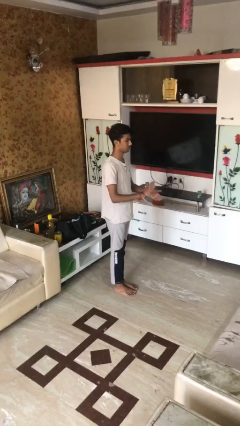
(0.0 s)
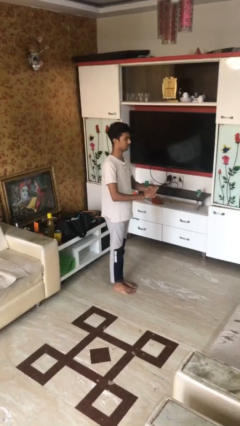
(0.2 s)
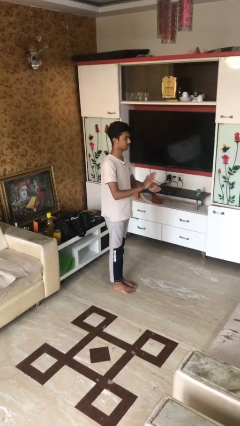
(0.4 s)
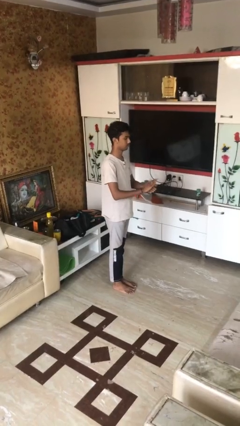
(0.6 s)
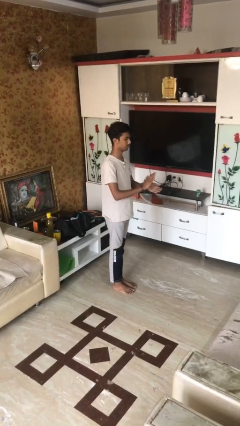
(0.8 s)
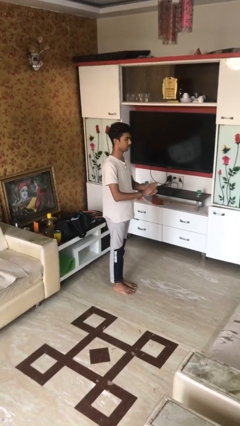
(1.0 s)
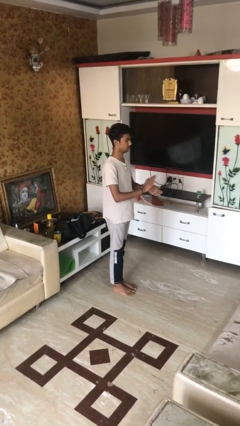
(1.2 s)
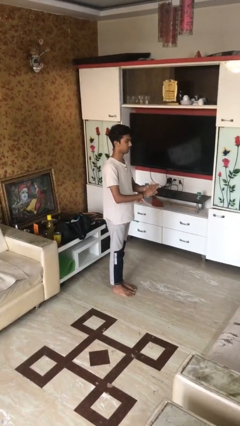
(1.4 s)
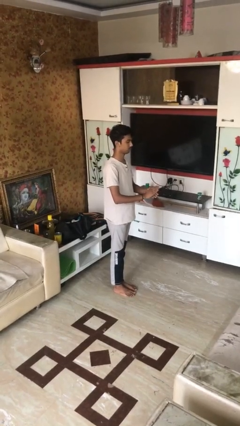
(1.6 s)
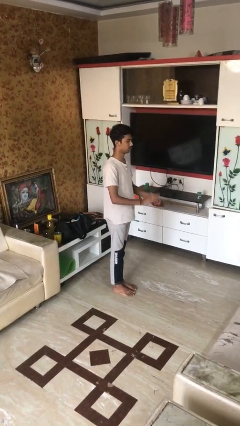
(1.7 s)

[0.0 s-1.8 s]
person claps hands

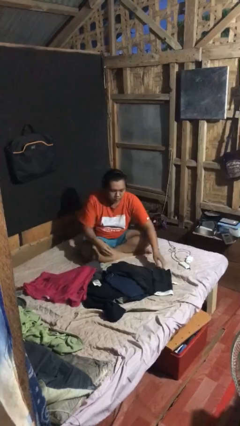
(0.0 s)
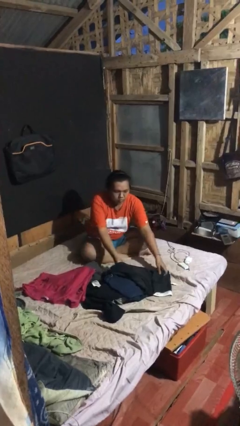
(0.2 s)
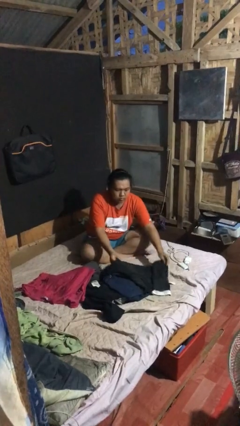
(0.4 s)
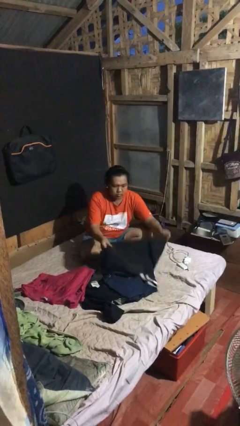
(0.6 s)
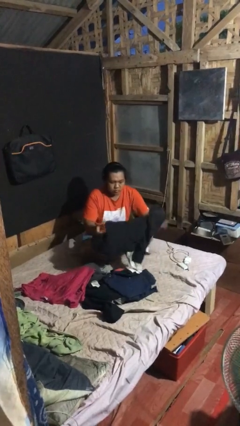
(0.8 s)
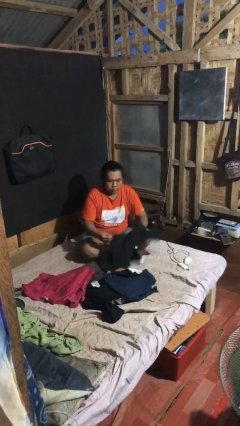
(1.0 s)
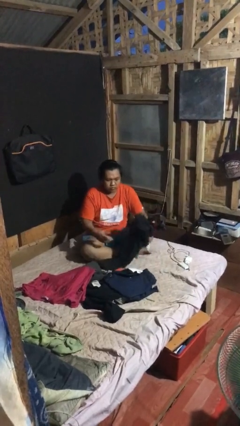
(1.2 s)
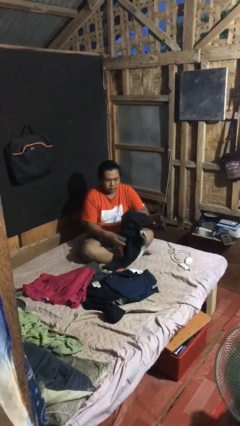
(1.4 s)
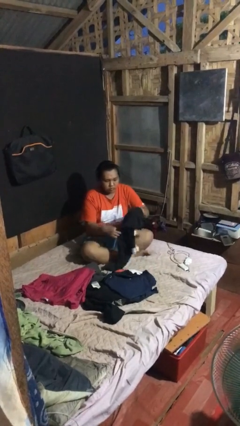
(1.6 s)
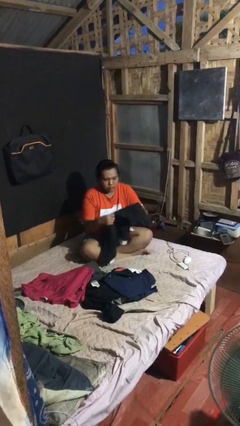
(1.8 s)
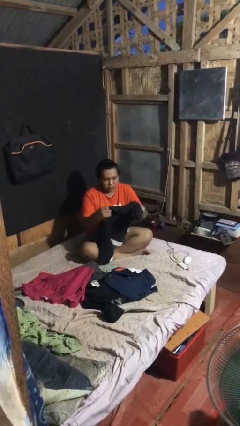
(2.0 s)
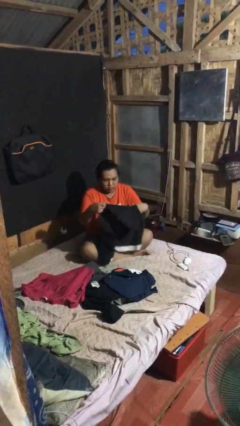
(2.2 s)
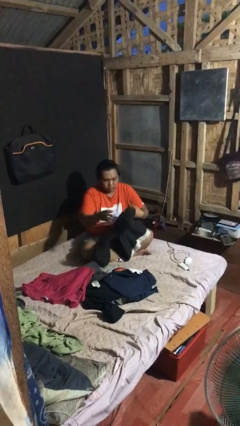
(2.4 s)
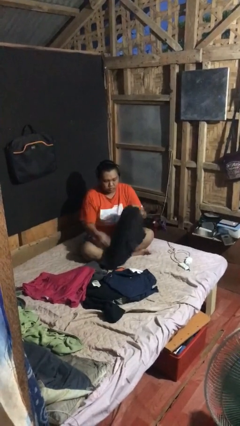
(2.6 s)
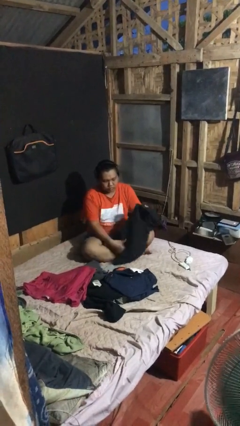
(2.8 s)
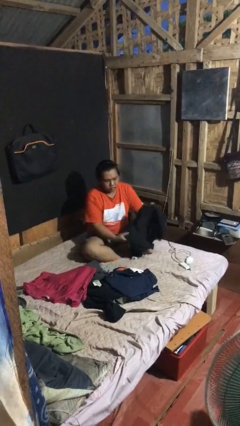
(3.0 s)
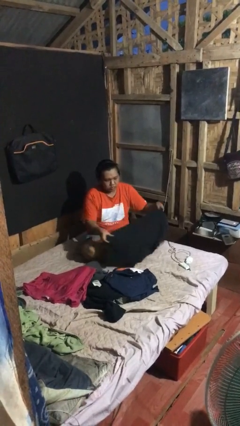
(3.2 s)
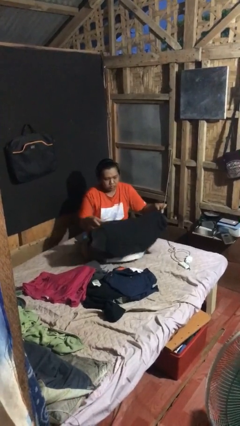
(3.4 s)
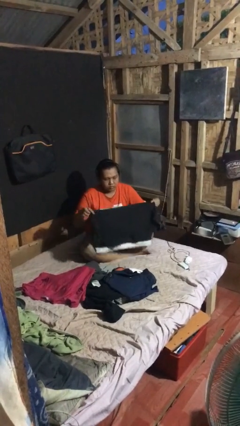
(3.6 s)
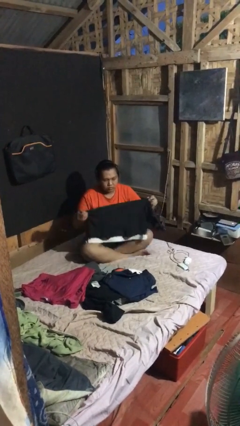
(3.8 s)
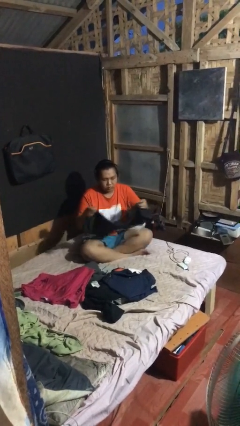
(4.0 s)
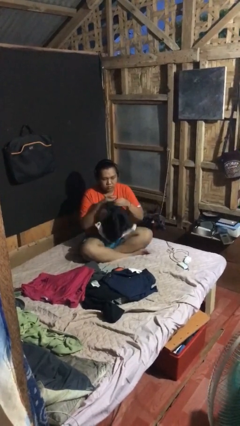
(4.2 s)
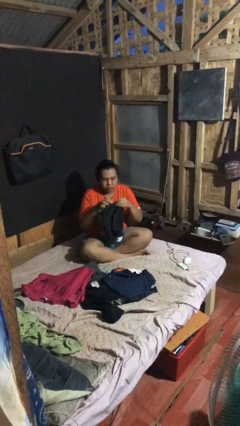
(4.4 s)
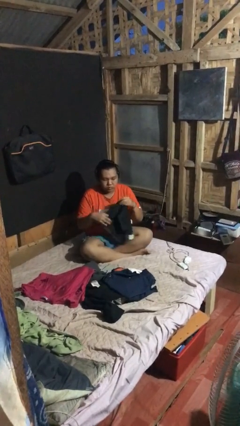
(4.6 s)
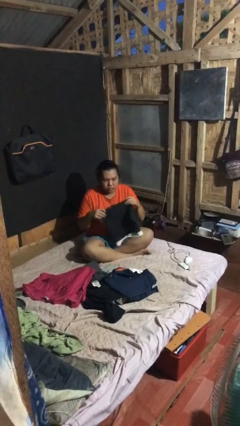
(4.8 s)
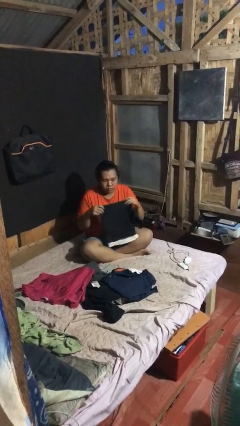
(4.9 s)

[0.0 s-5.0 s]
person folds shirt

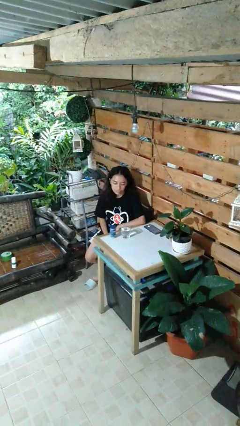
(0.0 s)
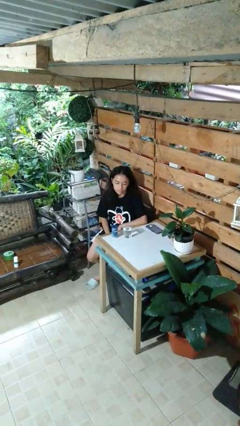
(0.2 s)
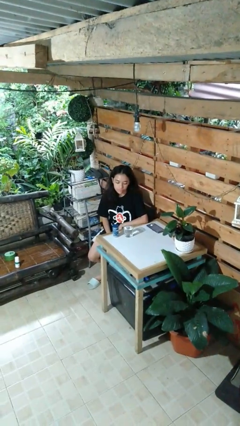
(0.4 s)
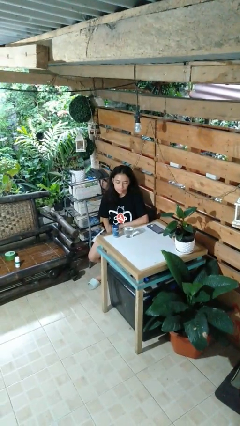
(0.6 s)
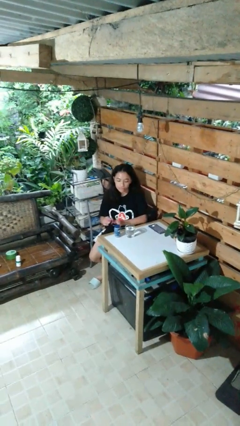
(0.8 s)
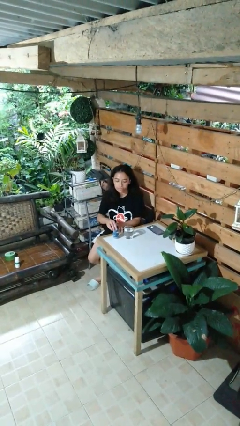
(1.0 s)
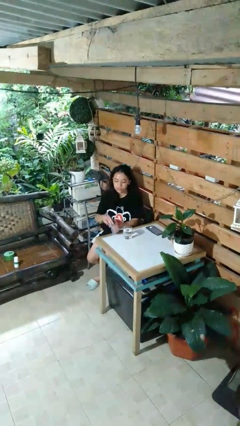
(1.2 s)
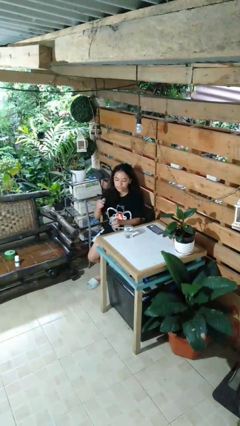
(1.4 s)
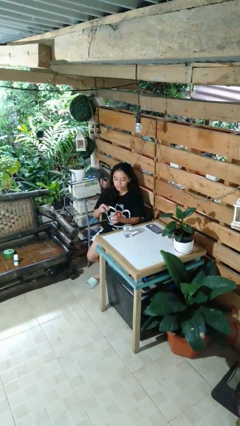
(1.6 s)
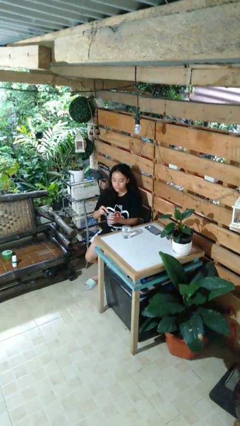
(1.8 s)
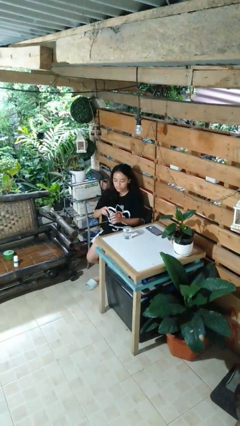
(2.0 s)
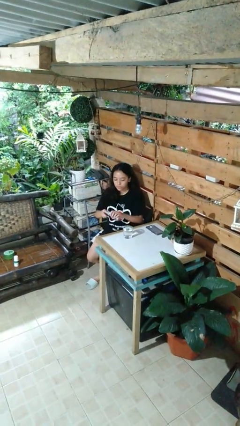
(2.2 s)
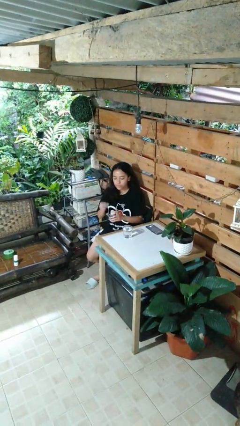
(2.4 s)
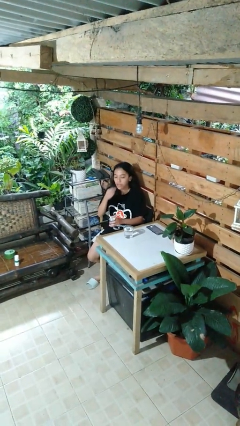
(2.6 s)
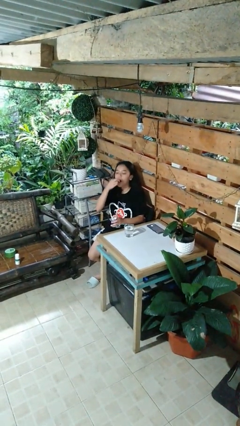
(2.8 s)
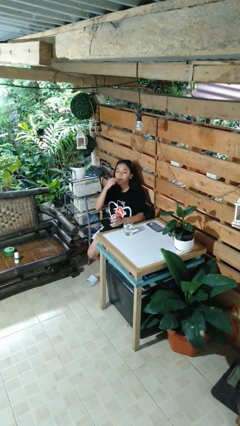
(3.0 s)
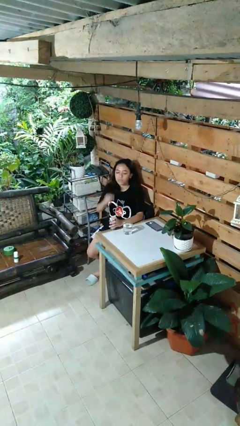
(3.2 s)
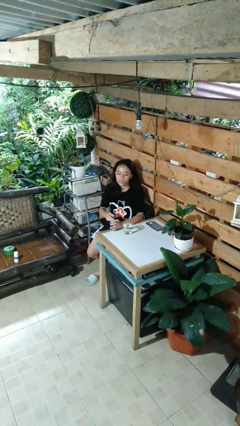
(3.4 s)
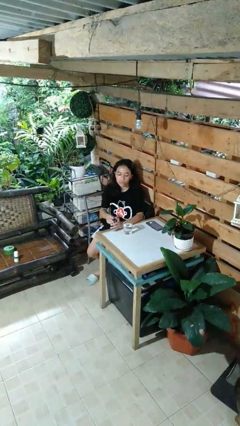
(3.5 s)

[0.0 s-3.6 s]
person takes medicine pills

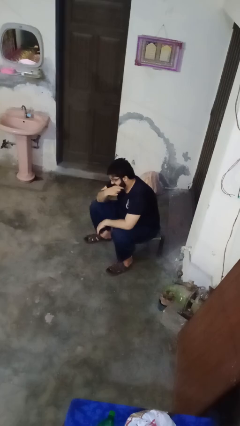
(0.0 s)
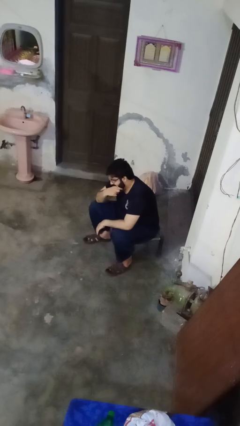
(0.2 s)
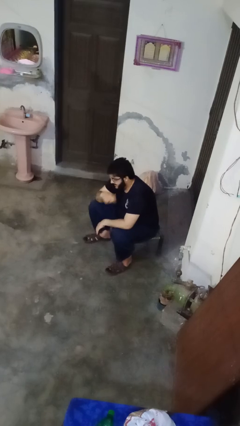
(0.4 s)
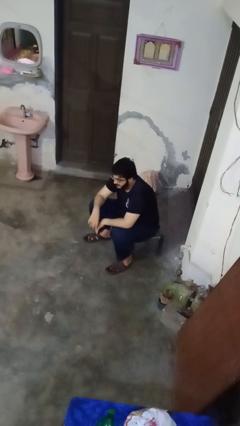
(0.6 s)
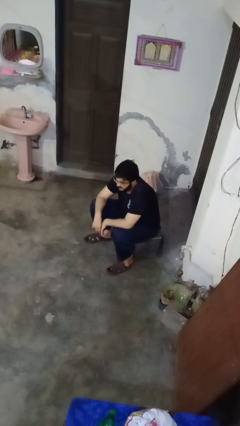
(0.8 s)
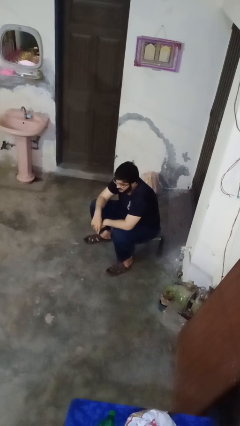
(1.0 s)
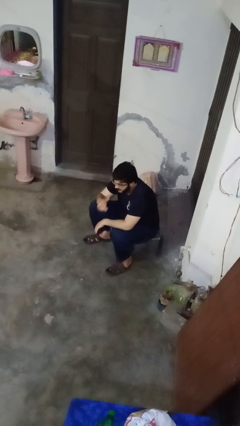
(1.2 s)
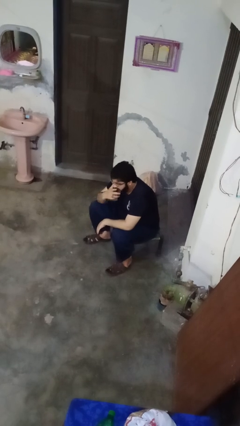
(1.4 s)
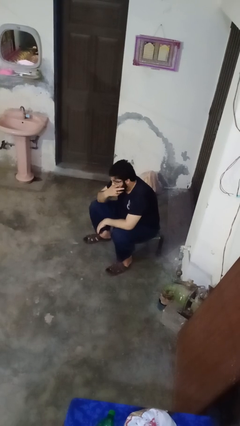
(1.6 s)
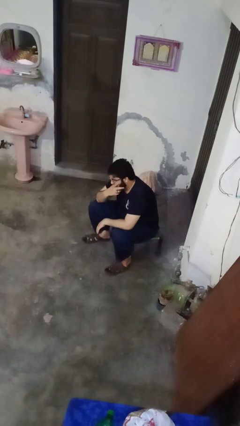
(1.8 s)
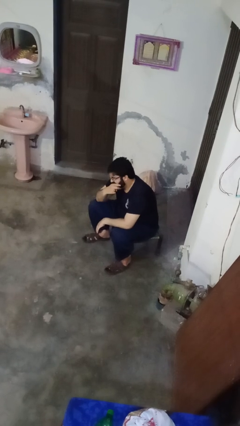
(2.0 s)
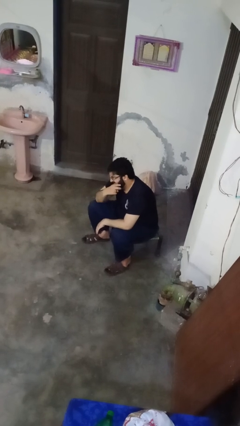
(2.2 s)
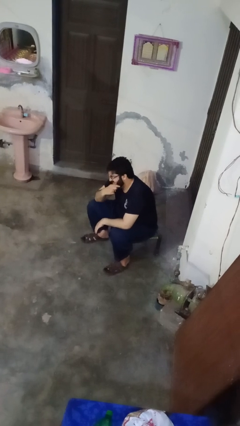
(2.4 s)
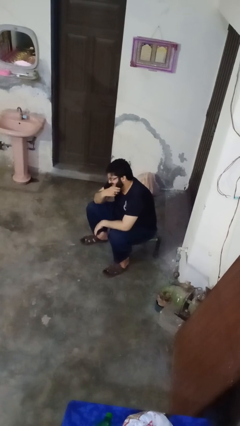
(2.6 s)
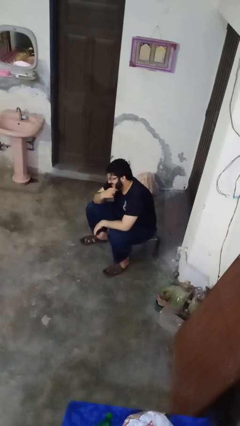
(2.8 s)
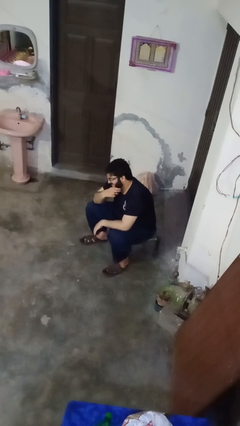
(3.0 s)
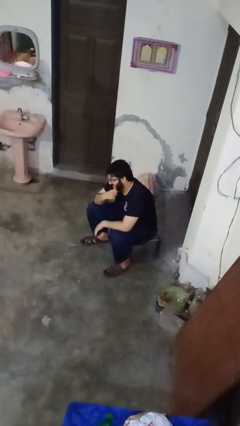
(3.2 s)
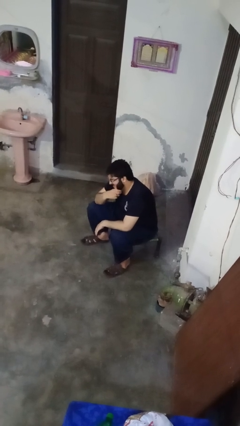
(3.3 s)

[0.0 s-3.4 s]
person strokes chin

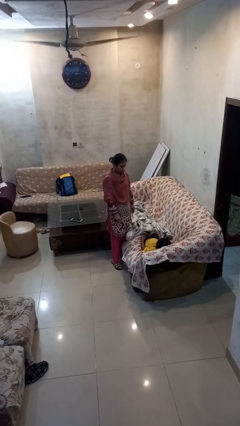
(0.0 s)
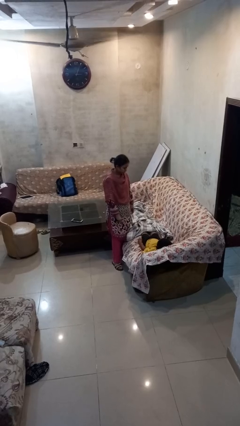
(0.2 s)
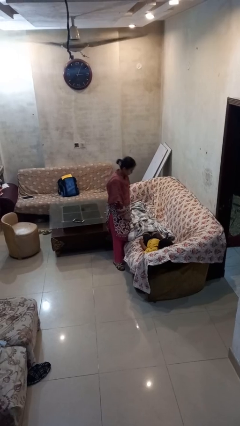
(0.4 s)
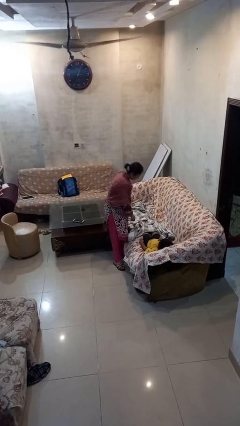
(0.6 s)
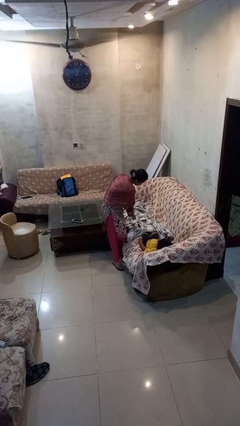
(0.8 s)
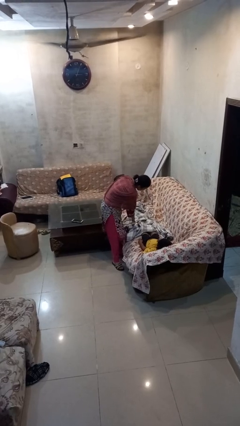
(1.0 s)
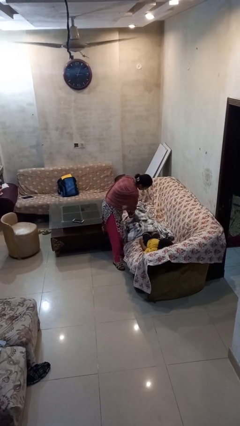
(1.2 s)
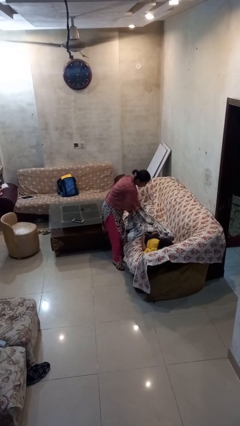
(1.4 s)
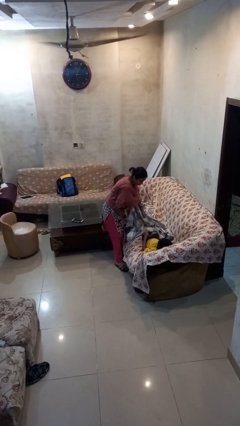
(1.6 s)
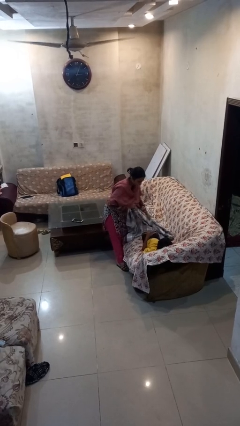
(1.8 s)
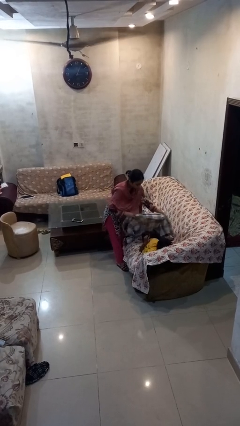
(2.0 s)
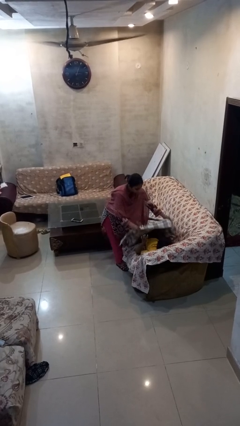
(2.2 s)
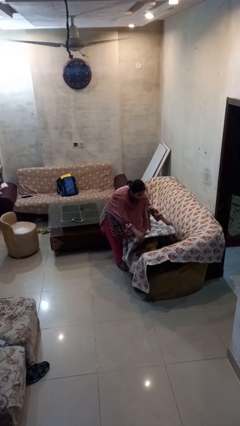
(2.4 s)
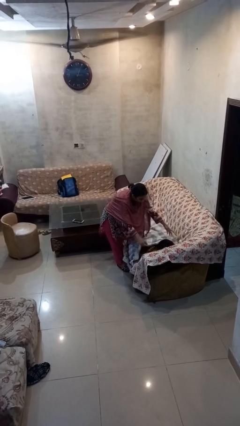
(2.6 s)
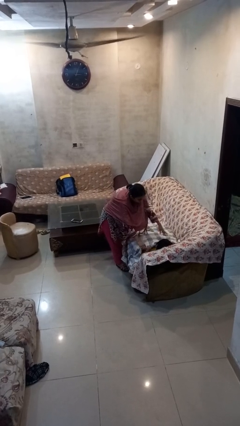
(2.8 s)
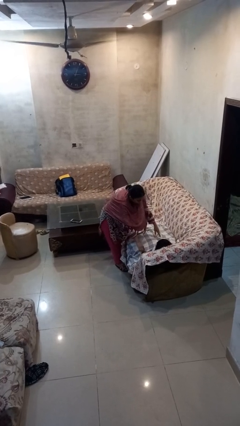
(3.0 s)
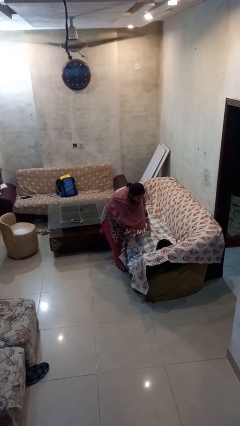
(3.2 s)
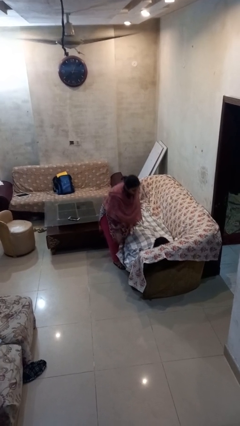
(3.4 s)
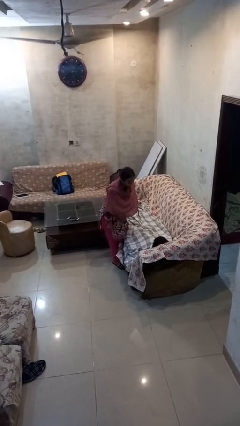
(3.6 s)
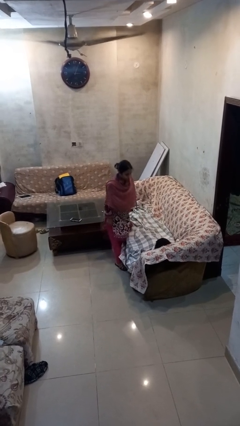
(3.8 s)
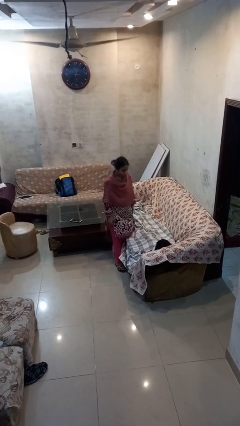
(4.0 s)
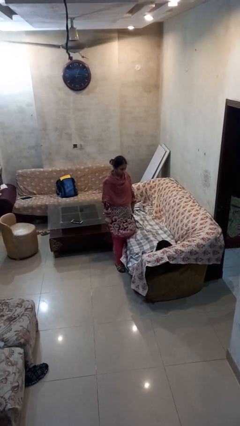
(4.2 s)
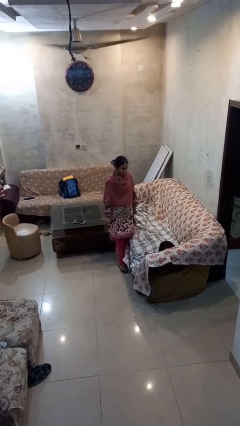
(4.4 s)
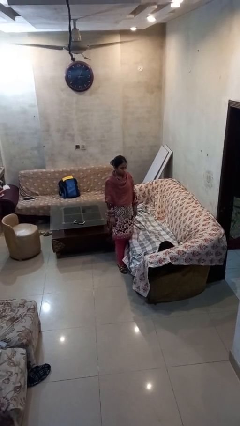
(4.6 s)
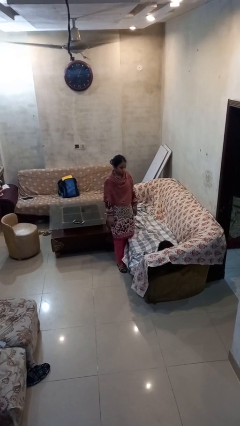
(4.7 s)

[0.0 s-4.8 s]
person covers friend with blanket
